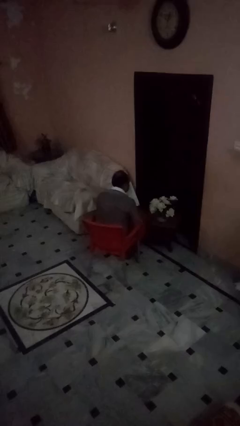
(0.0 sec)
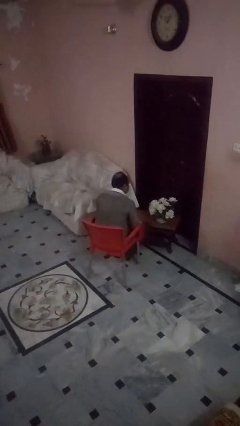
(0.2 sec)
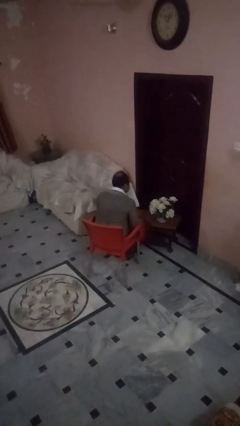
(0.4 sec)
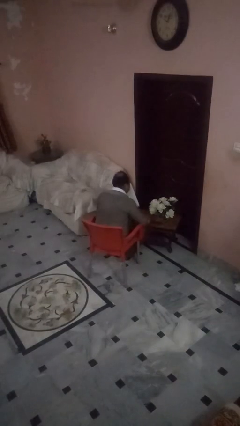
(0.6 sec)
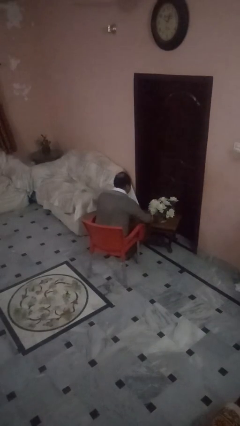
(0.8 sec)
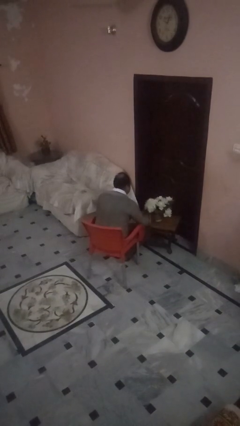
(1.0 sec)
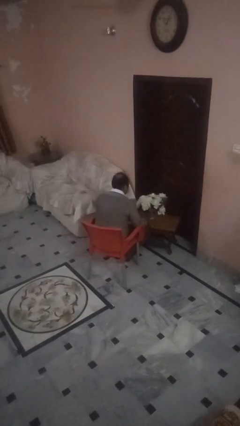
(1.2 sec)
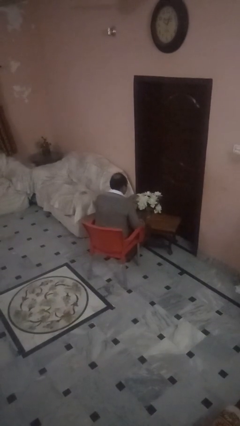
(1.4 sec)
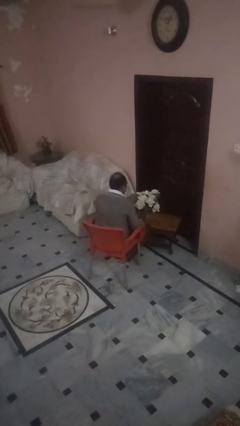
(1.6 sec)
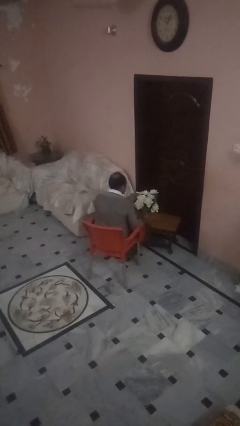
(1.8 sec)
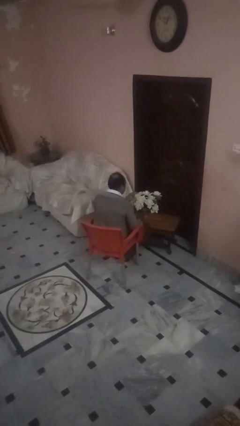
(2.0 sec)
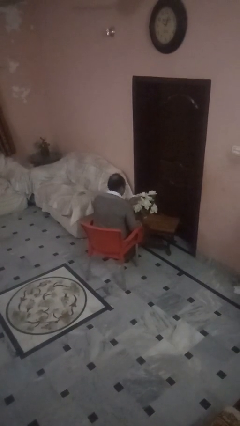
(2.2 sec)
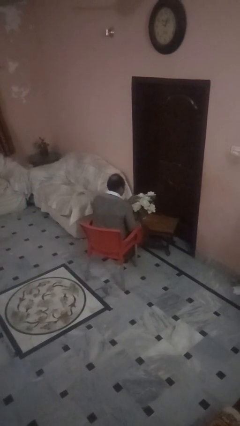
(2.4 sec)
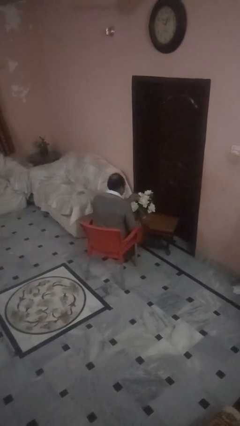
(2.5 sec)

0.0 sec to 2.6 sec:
person arranges flowers in vase

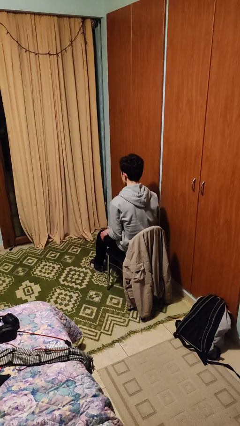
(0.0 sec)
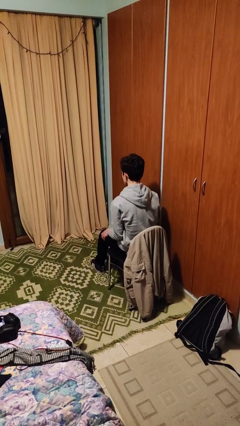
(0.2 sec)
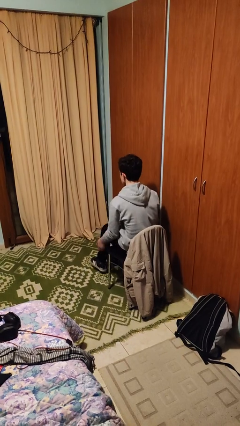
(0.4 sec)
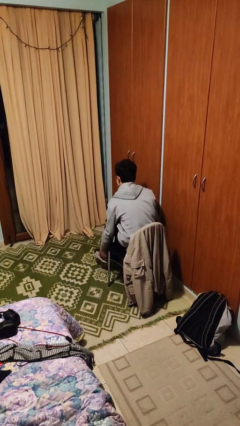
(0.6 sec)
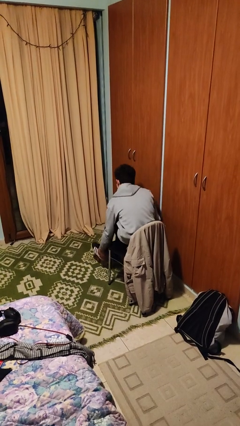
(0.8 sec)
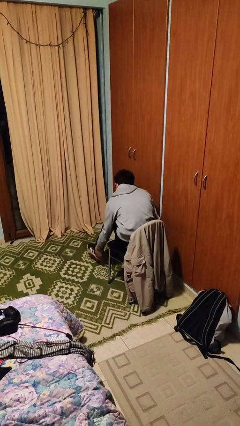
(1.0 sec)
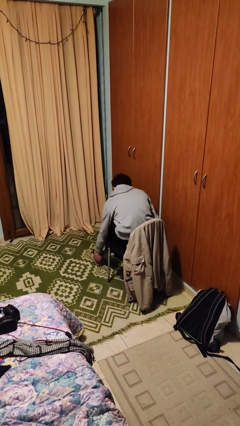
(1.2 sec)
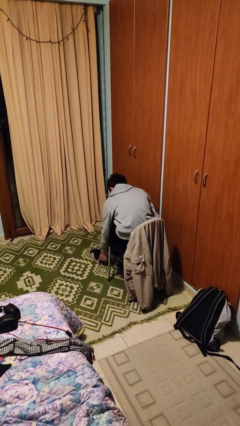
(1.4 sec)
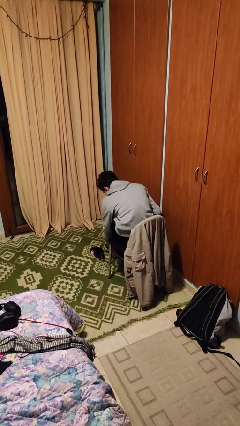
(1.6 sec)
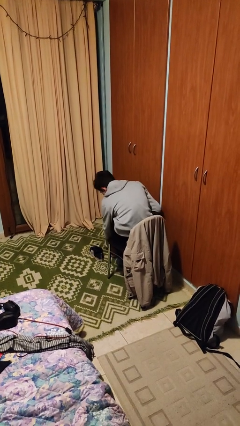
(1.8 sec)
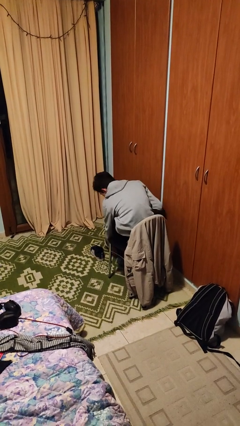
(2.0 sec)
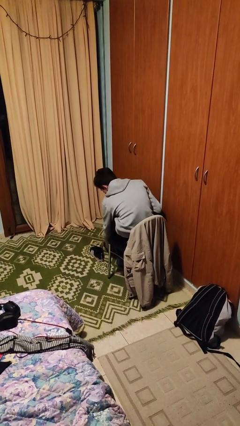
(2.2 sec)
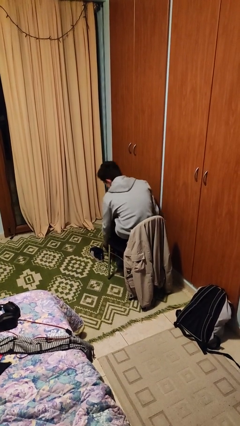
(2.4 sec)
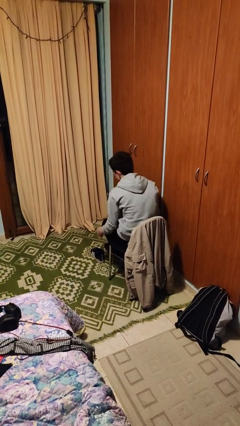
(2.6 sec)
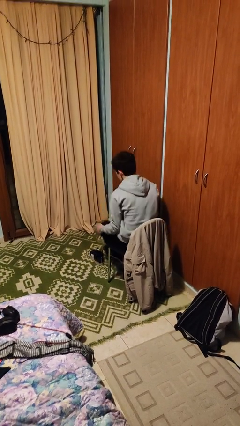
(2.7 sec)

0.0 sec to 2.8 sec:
person takes off shoes

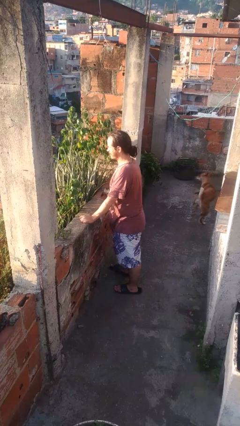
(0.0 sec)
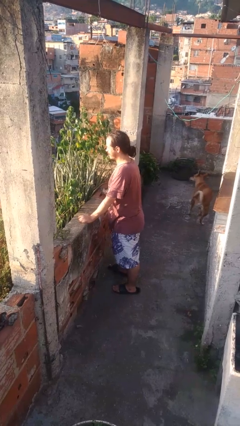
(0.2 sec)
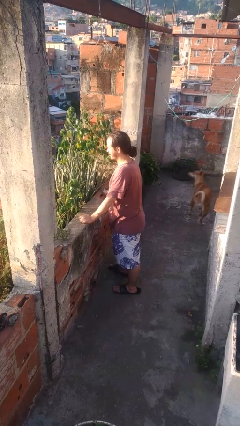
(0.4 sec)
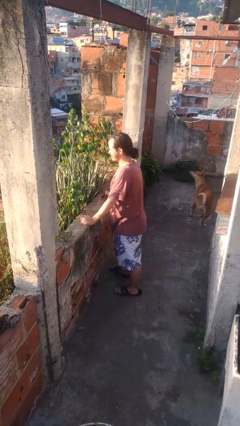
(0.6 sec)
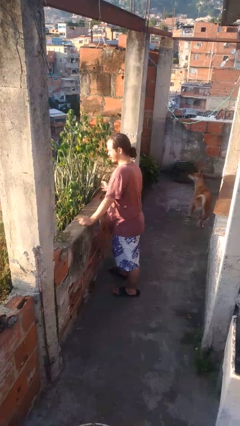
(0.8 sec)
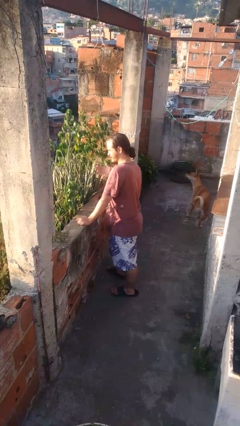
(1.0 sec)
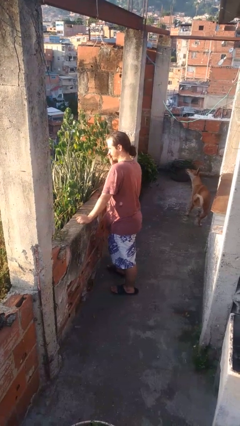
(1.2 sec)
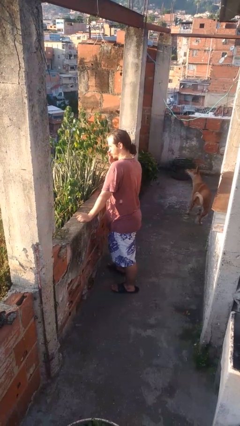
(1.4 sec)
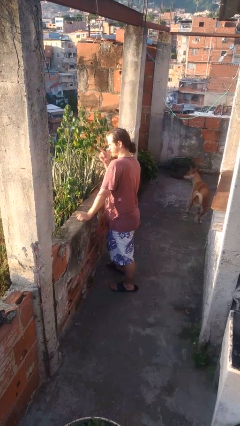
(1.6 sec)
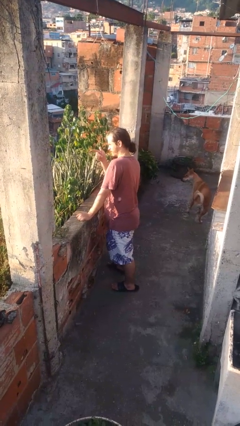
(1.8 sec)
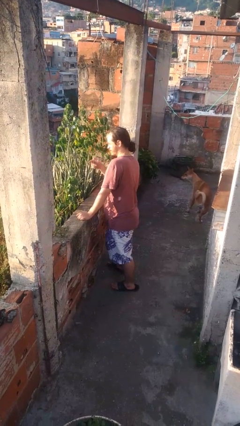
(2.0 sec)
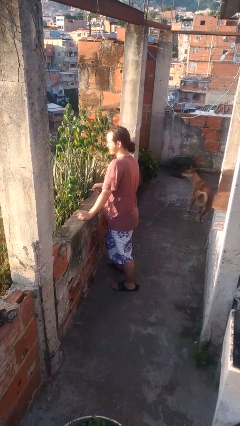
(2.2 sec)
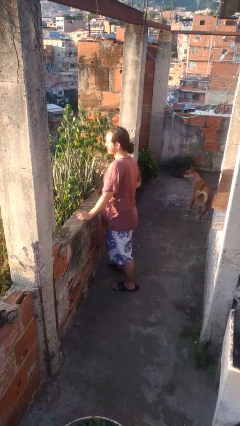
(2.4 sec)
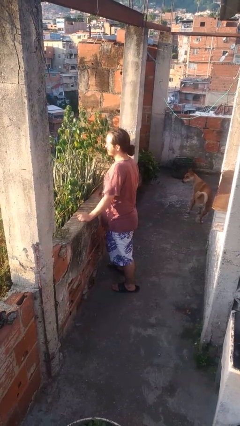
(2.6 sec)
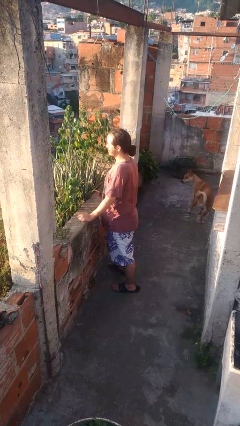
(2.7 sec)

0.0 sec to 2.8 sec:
person gestures blow kiss

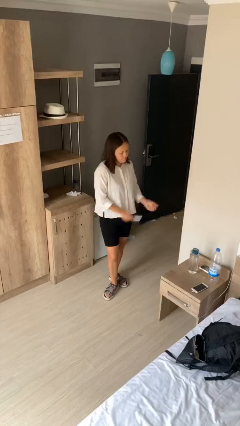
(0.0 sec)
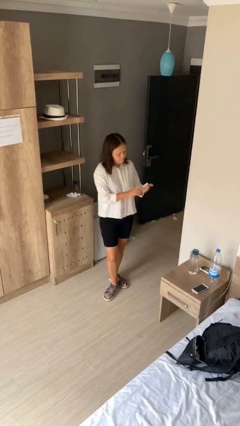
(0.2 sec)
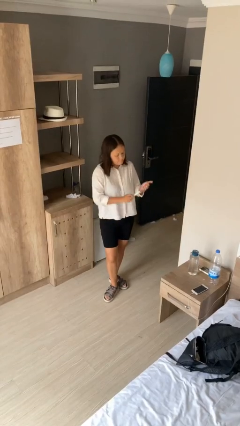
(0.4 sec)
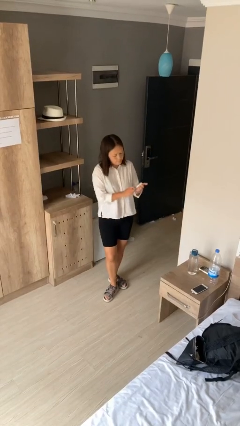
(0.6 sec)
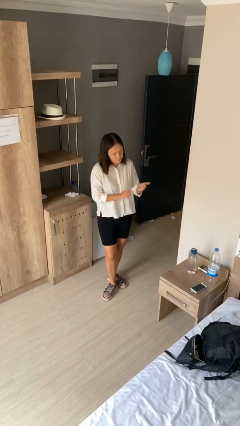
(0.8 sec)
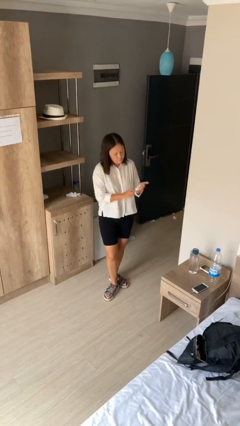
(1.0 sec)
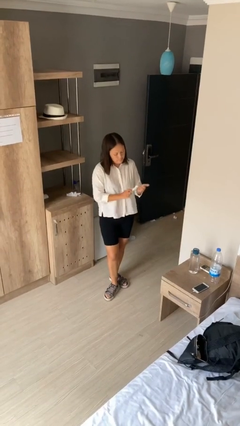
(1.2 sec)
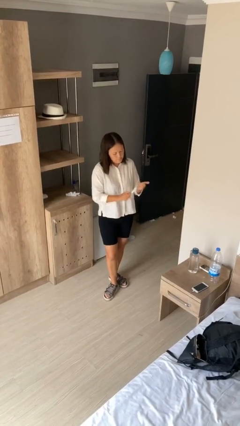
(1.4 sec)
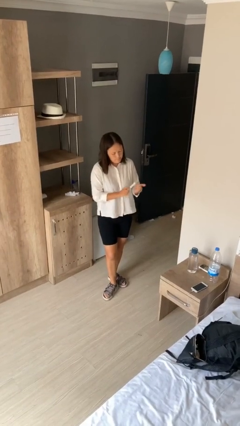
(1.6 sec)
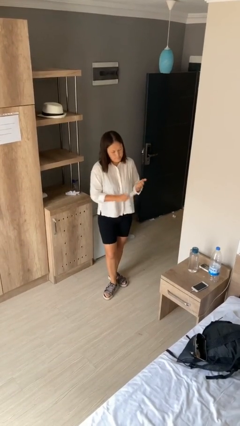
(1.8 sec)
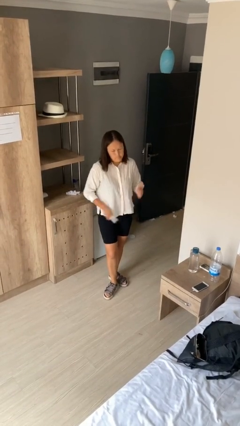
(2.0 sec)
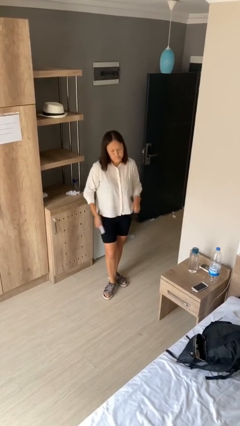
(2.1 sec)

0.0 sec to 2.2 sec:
person files fingernails

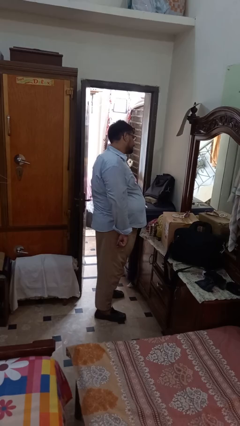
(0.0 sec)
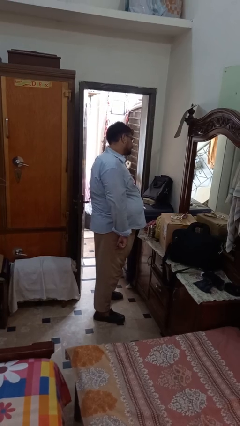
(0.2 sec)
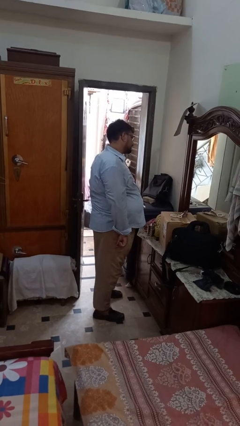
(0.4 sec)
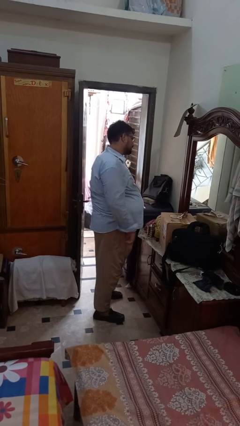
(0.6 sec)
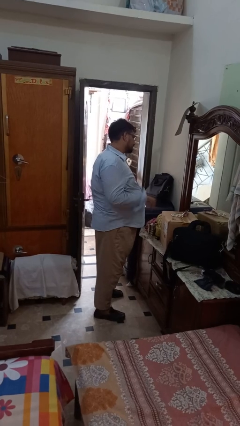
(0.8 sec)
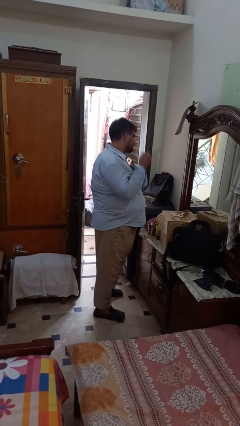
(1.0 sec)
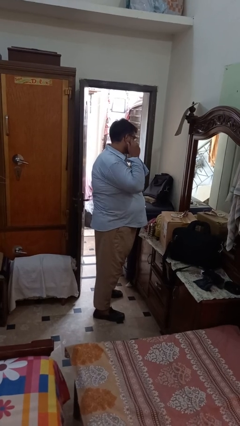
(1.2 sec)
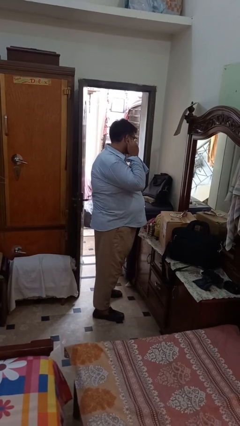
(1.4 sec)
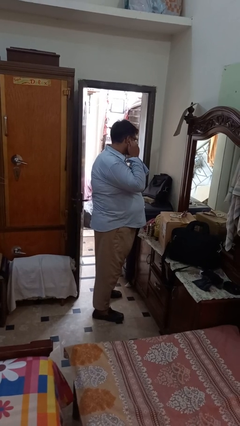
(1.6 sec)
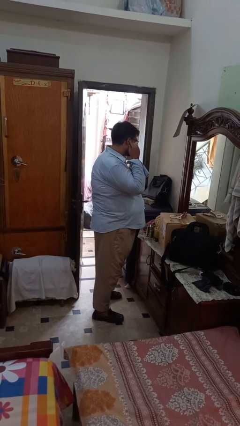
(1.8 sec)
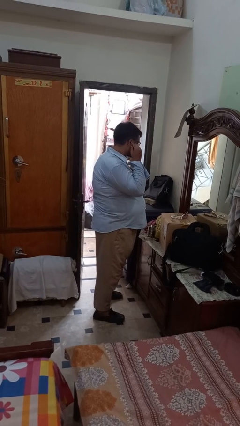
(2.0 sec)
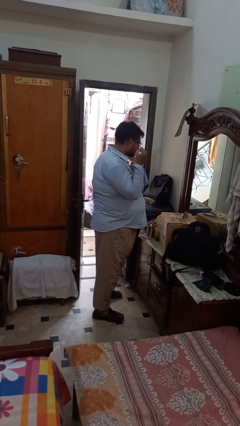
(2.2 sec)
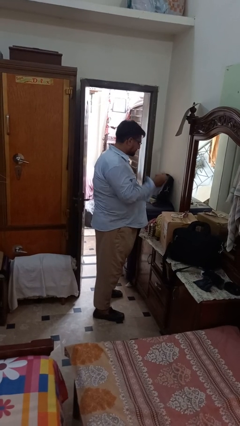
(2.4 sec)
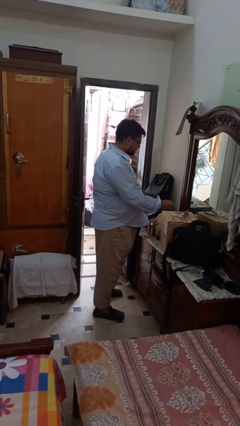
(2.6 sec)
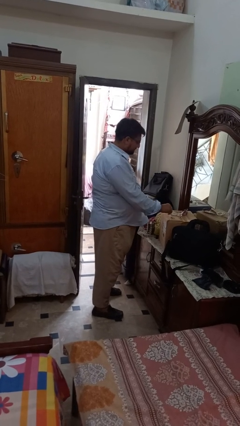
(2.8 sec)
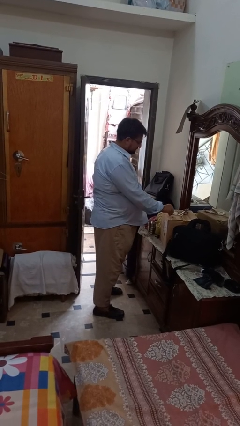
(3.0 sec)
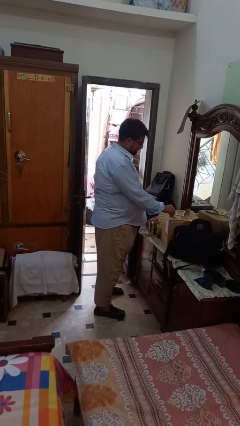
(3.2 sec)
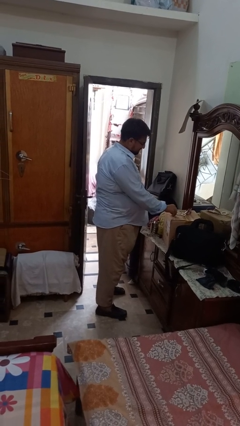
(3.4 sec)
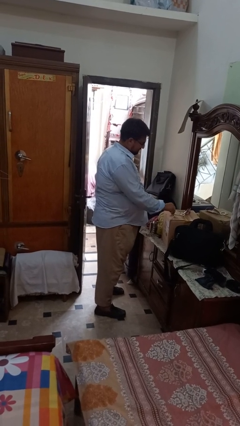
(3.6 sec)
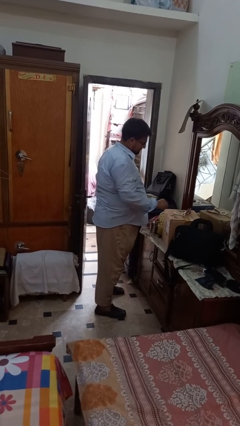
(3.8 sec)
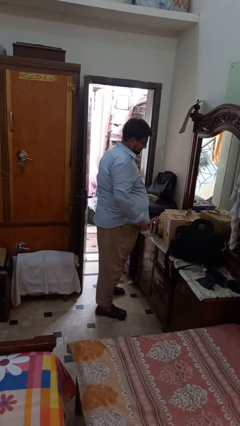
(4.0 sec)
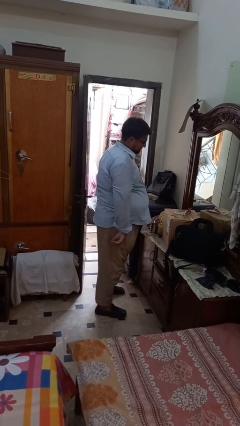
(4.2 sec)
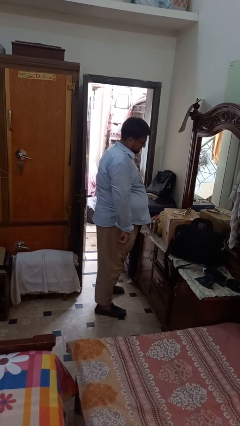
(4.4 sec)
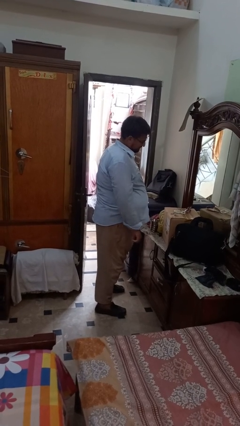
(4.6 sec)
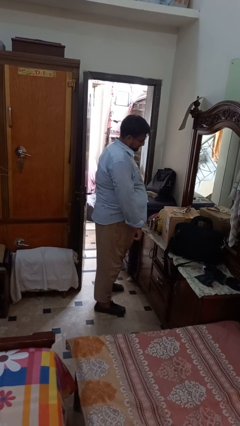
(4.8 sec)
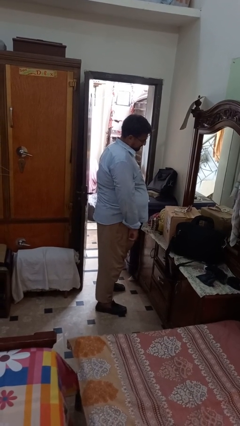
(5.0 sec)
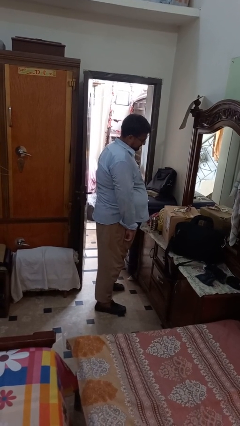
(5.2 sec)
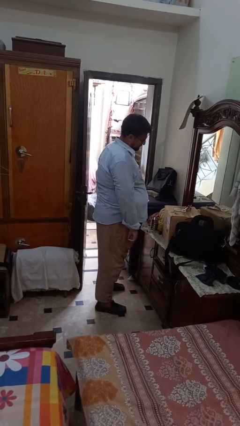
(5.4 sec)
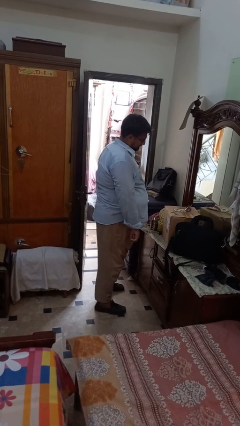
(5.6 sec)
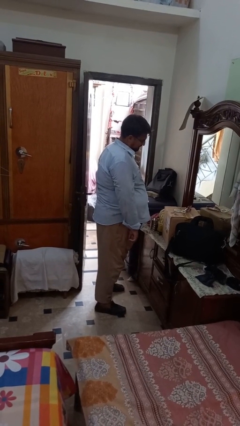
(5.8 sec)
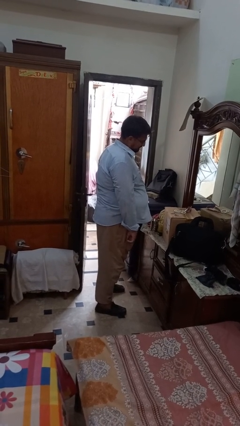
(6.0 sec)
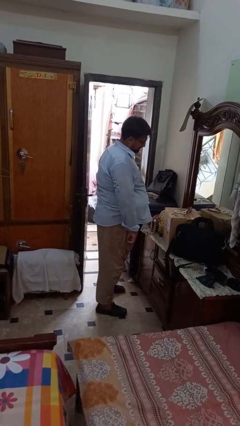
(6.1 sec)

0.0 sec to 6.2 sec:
person takes off earrings

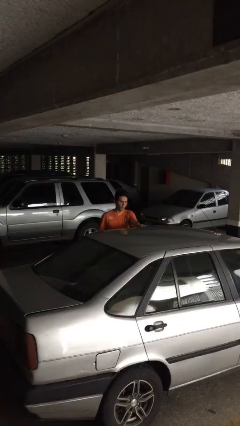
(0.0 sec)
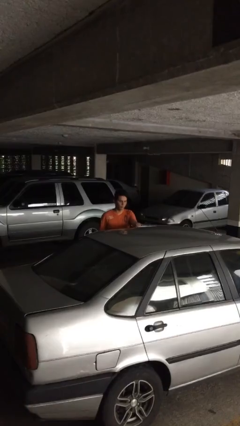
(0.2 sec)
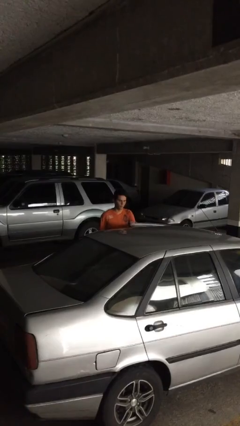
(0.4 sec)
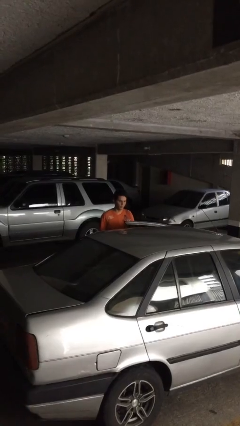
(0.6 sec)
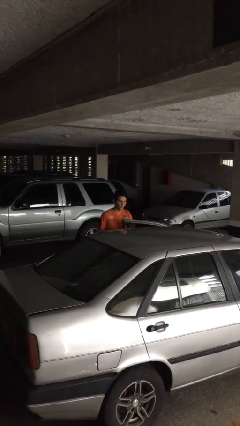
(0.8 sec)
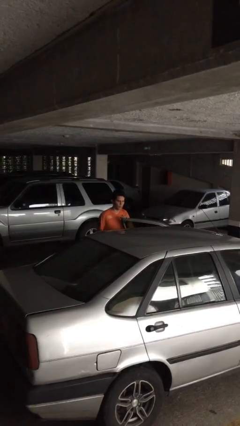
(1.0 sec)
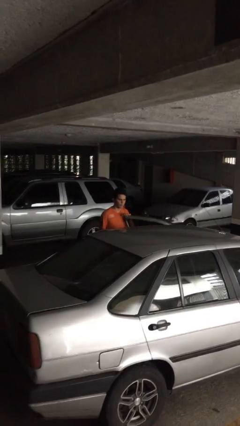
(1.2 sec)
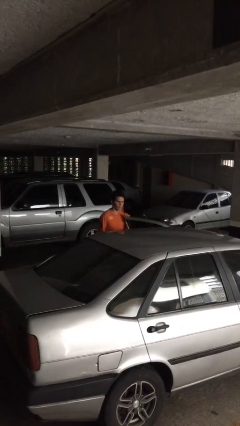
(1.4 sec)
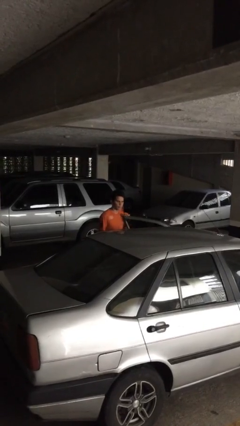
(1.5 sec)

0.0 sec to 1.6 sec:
person opens car door
